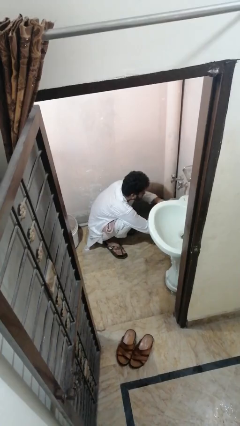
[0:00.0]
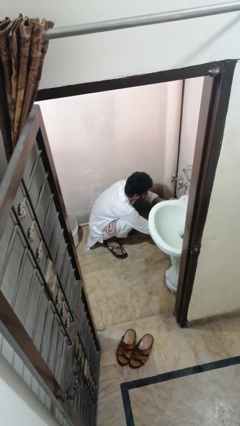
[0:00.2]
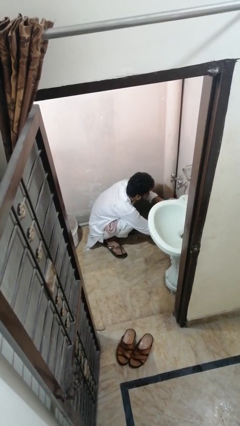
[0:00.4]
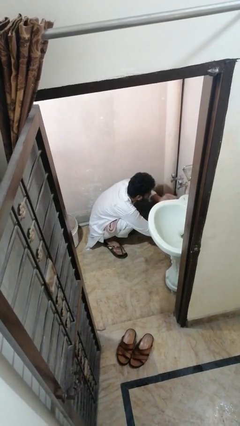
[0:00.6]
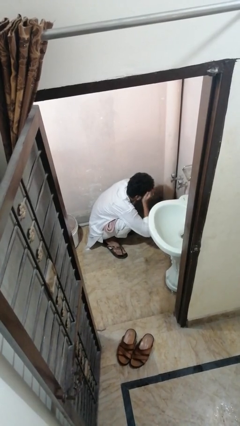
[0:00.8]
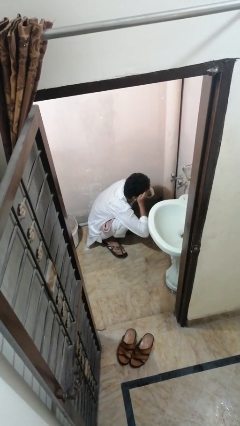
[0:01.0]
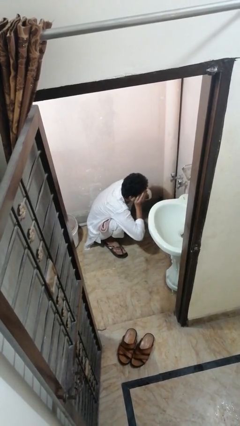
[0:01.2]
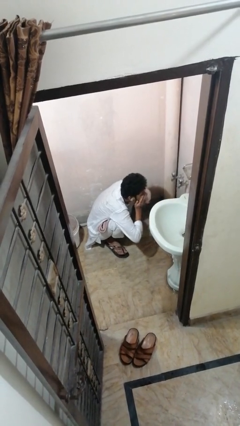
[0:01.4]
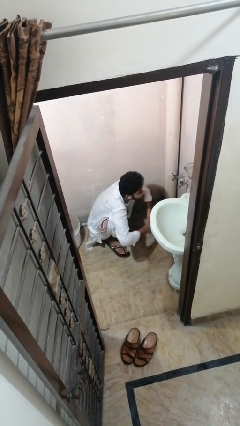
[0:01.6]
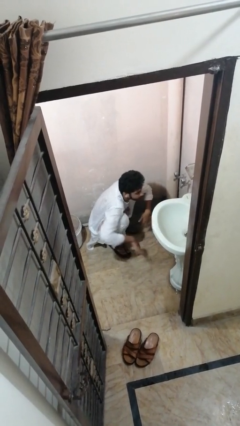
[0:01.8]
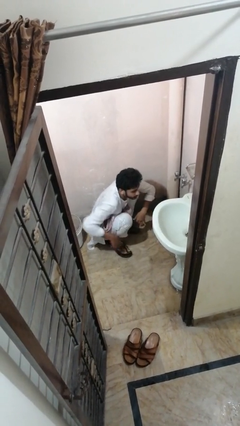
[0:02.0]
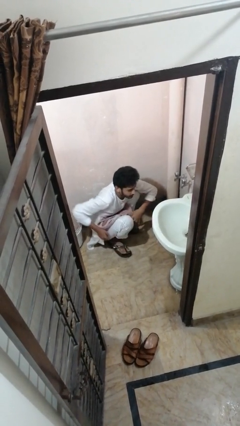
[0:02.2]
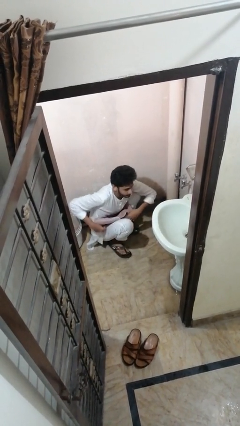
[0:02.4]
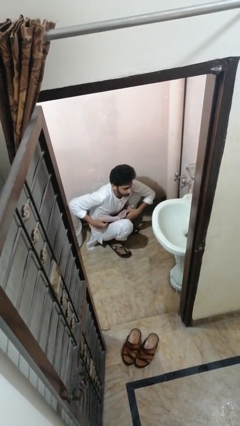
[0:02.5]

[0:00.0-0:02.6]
person washes face

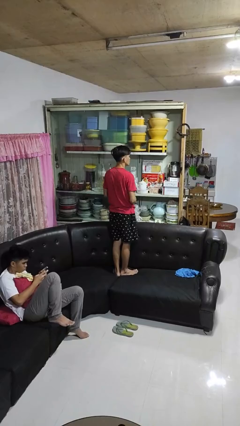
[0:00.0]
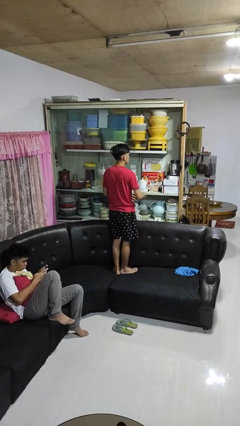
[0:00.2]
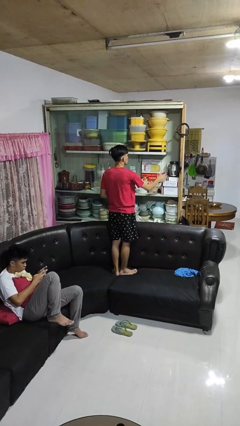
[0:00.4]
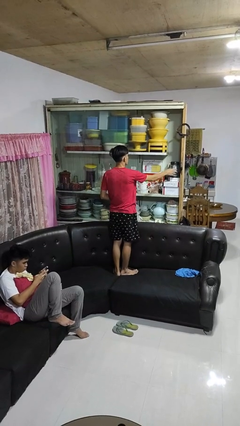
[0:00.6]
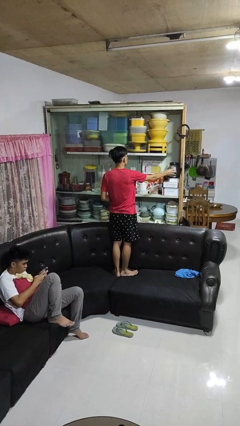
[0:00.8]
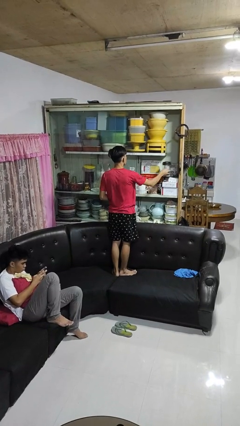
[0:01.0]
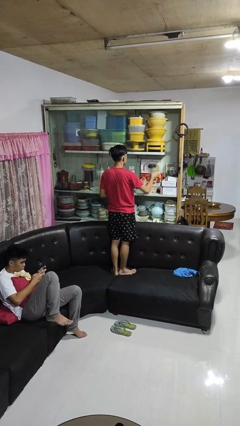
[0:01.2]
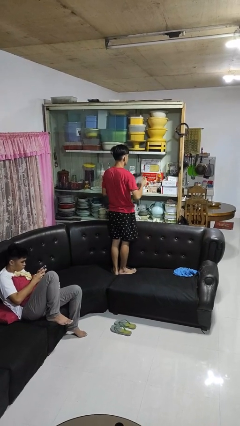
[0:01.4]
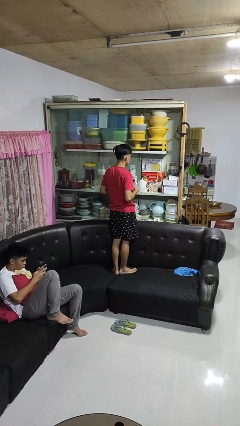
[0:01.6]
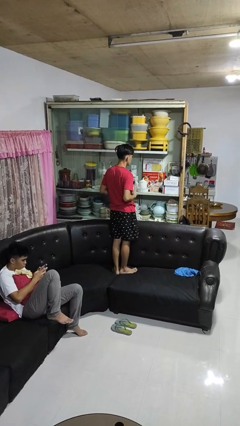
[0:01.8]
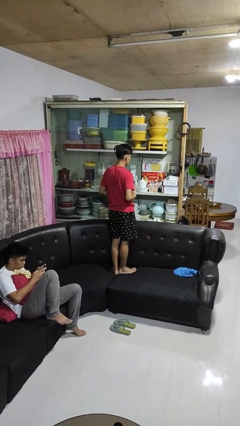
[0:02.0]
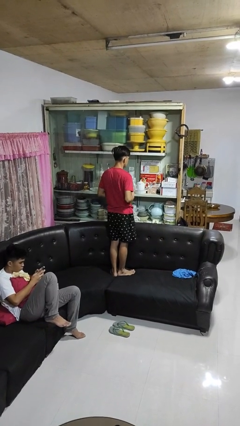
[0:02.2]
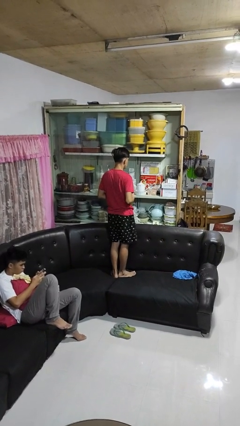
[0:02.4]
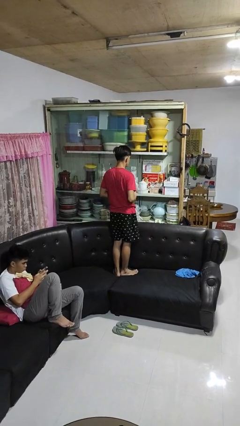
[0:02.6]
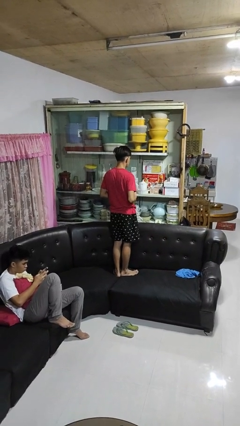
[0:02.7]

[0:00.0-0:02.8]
person picks up object from cabinet

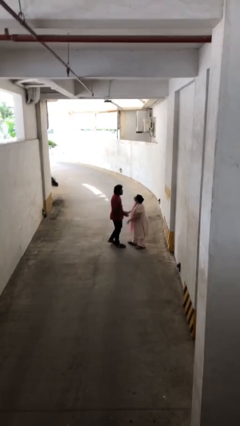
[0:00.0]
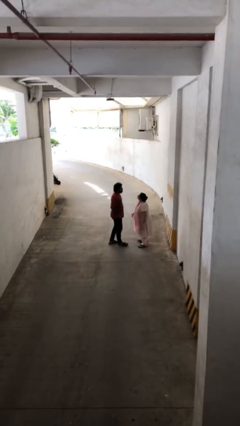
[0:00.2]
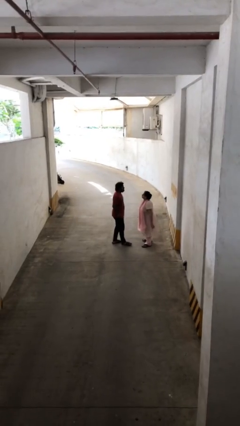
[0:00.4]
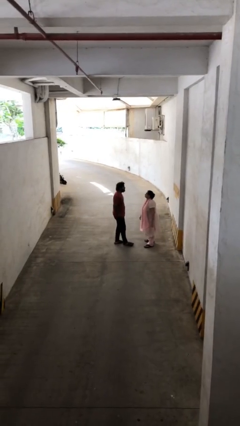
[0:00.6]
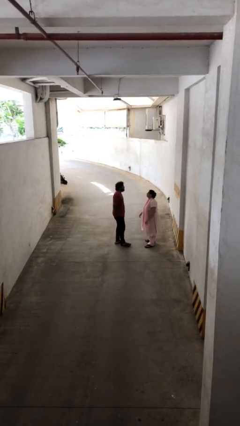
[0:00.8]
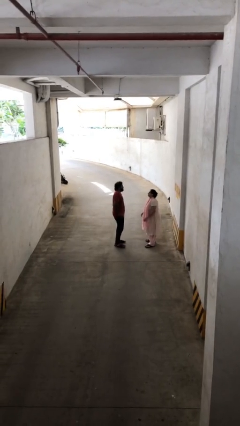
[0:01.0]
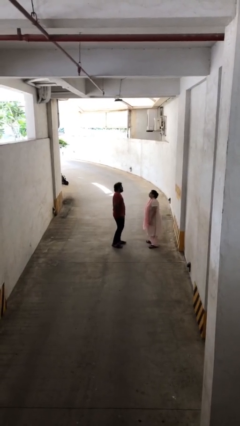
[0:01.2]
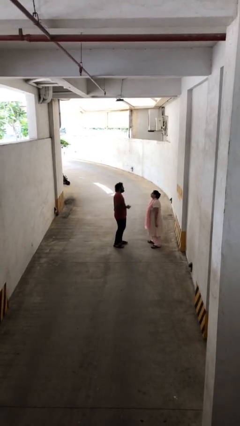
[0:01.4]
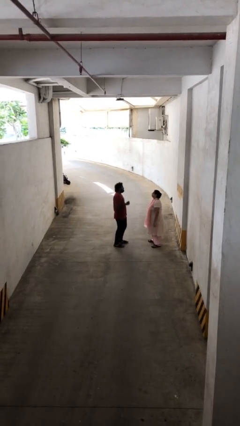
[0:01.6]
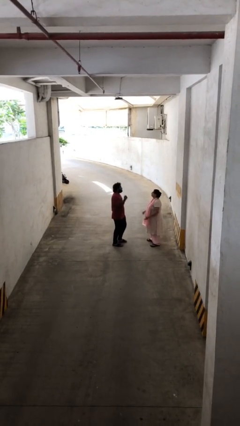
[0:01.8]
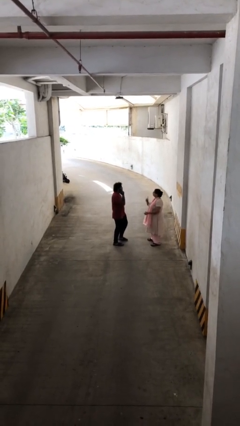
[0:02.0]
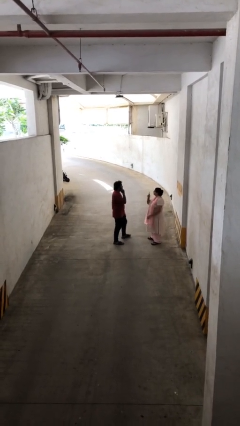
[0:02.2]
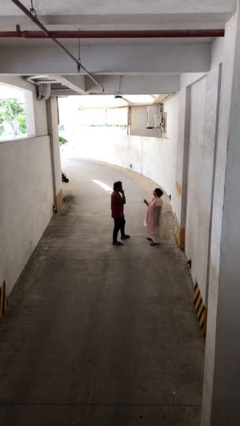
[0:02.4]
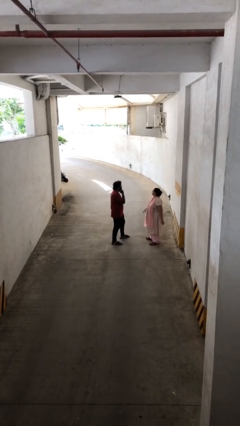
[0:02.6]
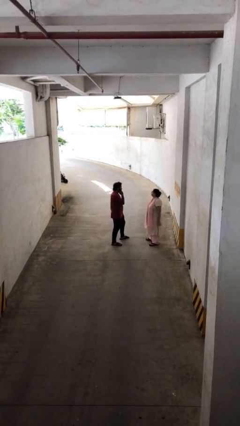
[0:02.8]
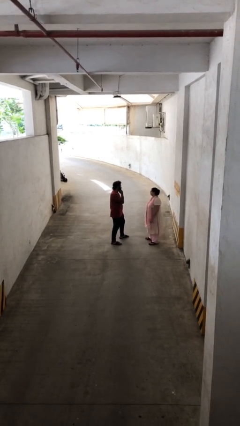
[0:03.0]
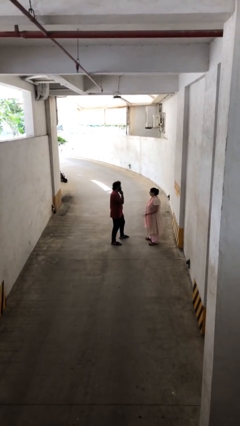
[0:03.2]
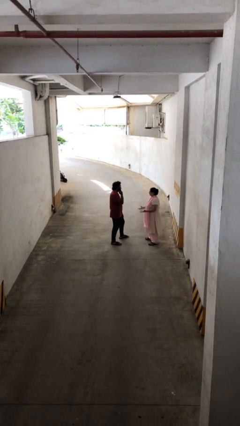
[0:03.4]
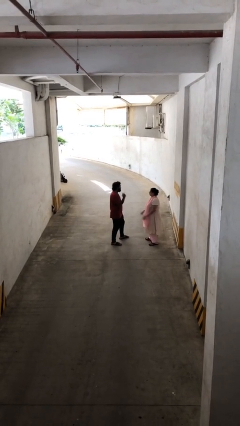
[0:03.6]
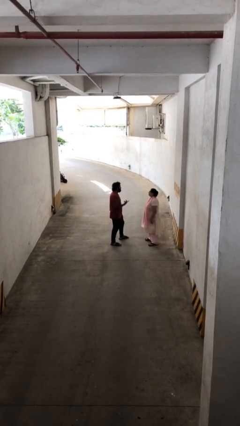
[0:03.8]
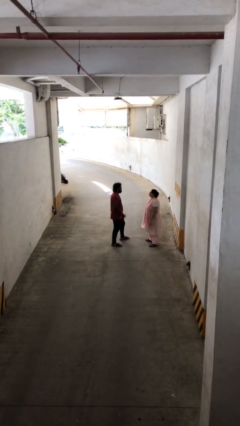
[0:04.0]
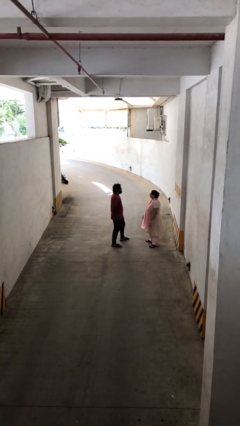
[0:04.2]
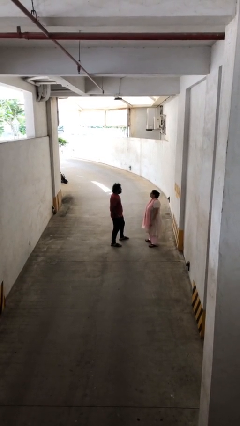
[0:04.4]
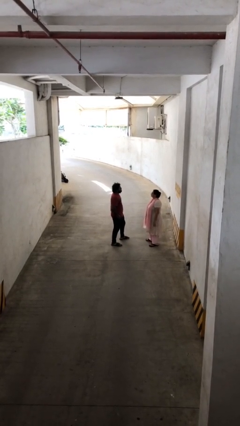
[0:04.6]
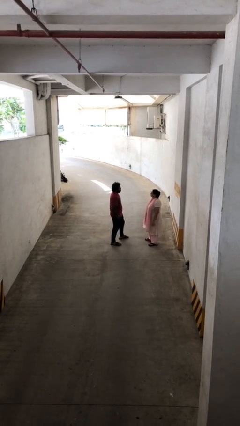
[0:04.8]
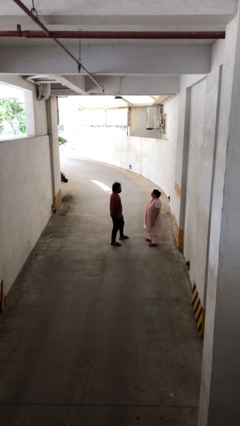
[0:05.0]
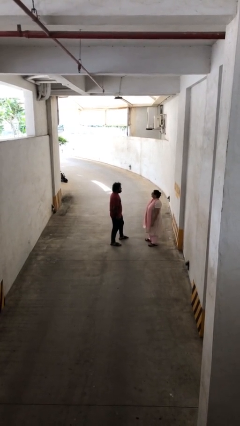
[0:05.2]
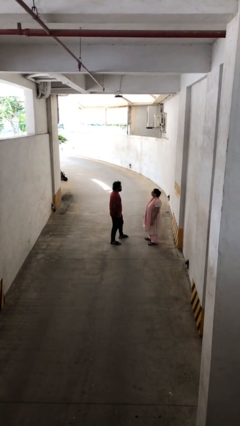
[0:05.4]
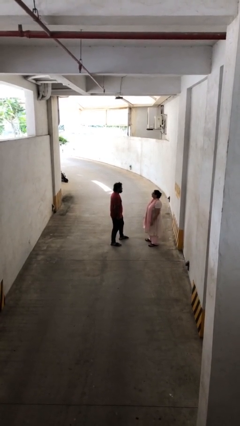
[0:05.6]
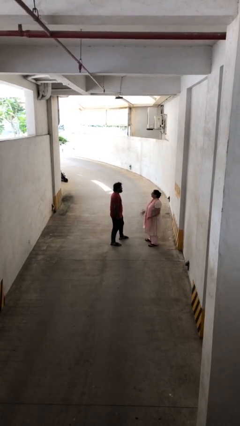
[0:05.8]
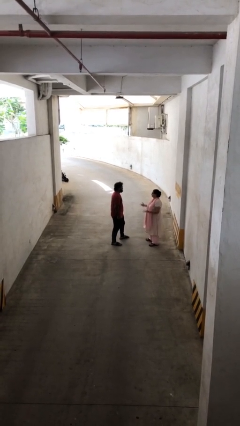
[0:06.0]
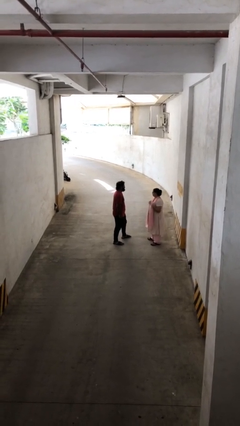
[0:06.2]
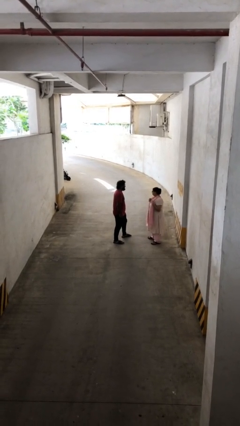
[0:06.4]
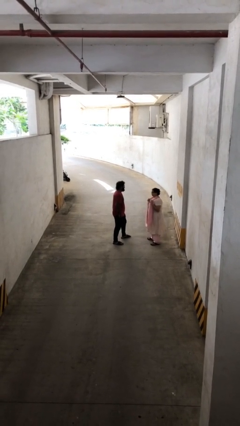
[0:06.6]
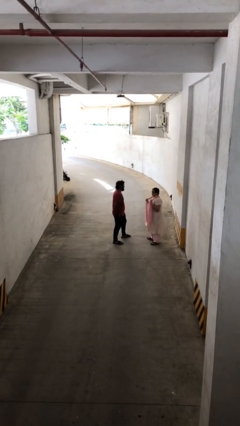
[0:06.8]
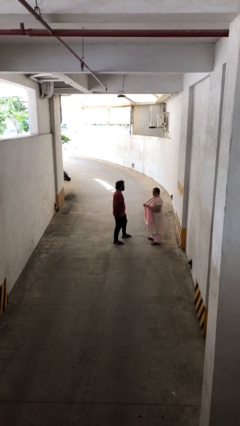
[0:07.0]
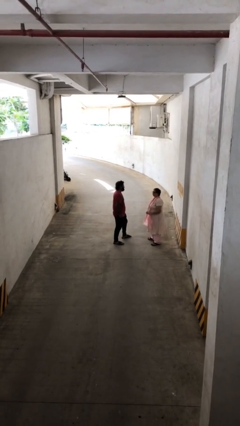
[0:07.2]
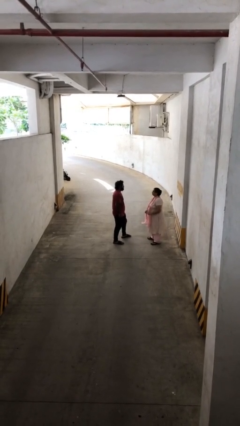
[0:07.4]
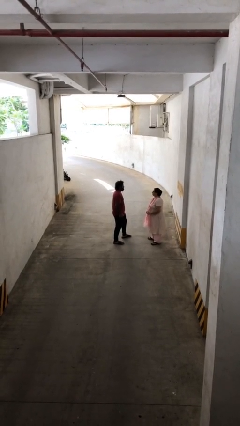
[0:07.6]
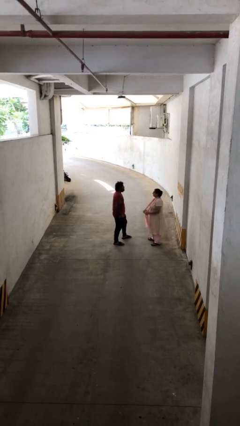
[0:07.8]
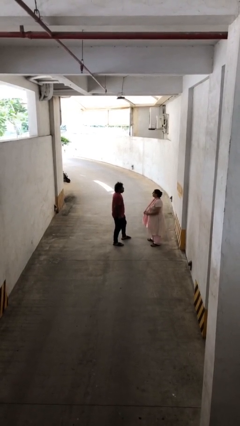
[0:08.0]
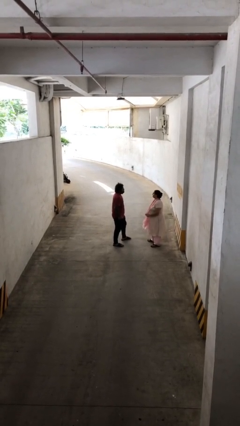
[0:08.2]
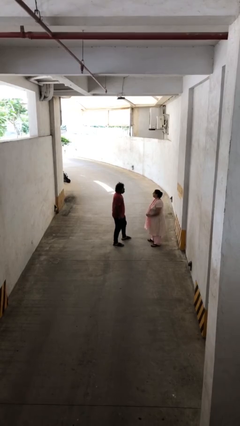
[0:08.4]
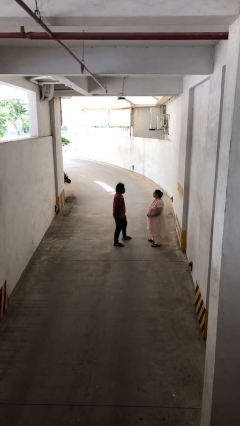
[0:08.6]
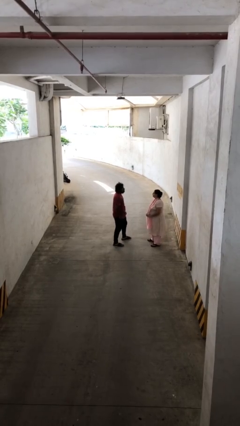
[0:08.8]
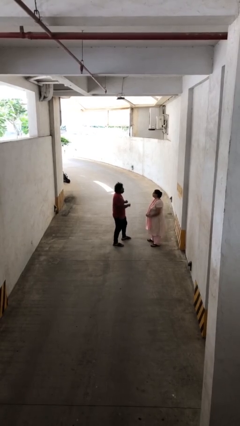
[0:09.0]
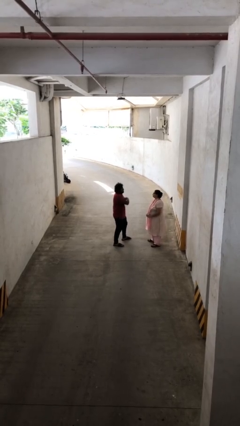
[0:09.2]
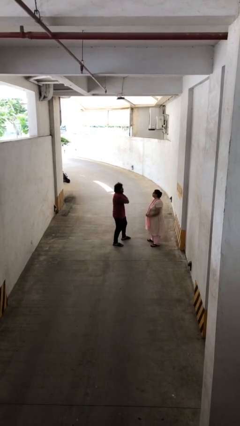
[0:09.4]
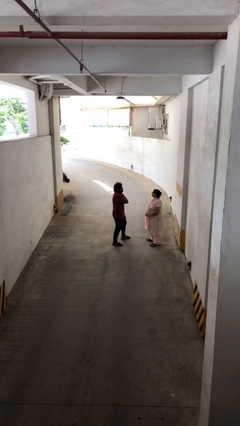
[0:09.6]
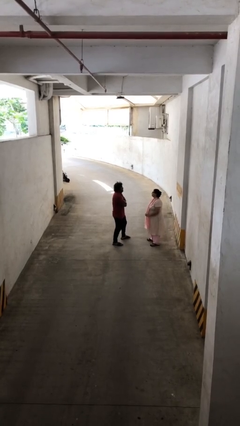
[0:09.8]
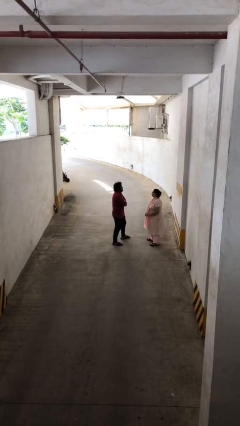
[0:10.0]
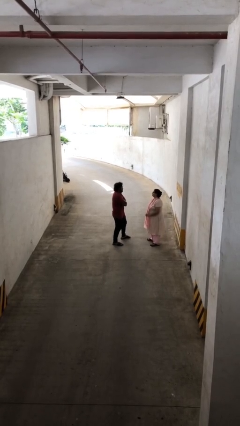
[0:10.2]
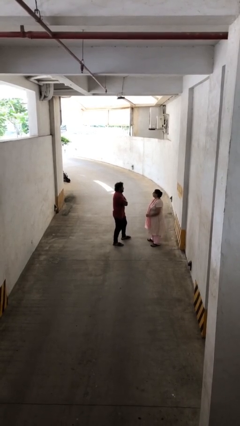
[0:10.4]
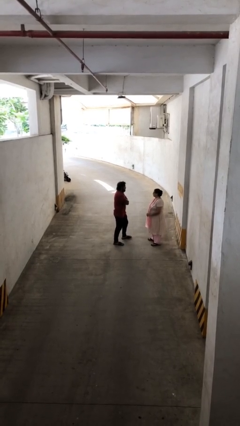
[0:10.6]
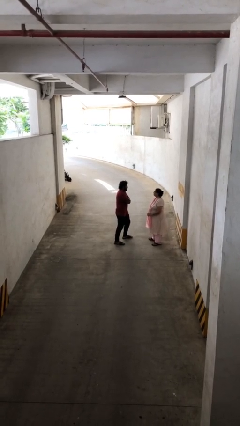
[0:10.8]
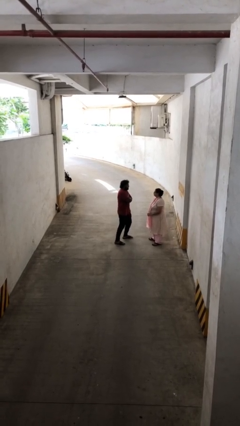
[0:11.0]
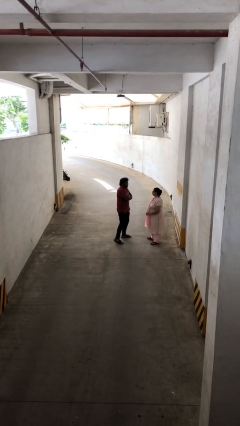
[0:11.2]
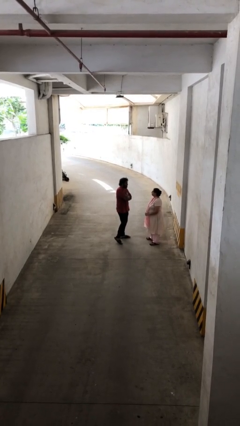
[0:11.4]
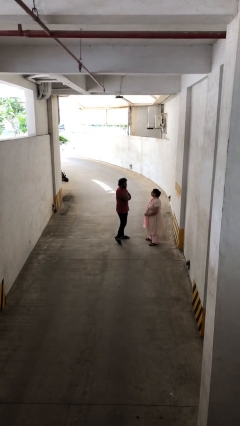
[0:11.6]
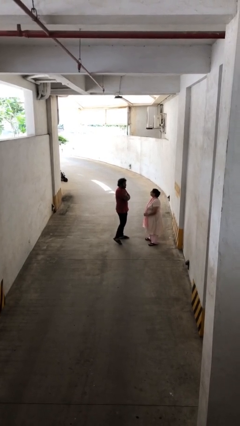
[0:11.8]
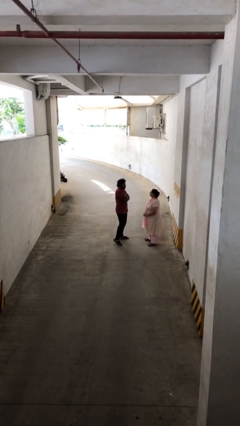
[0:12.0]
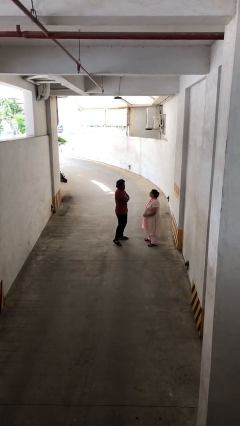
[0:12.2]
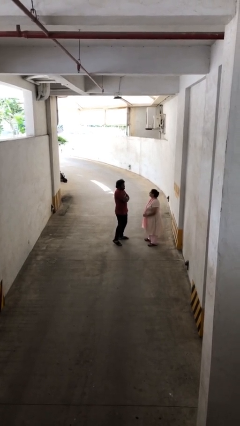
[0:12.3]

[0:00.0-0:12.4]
person talks to person
